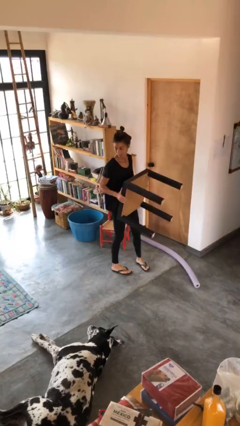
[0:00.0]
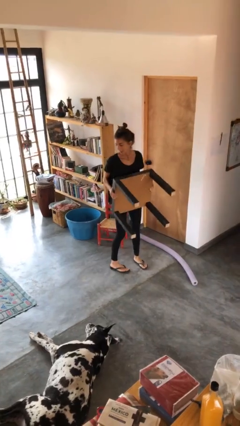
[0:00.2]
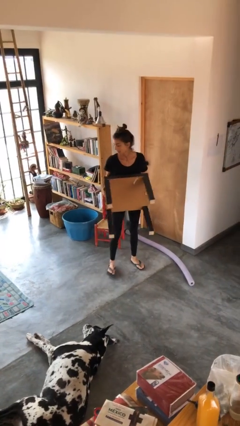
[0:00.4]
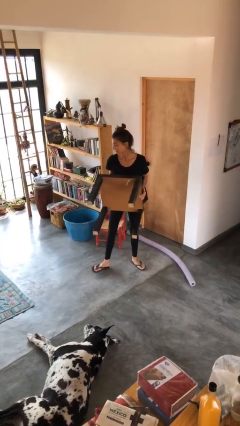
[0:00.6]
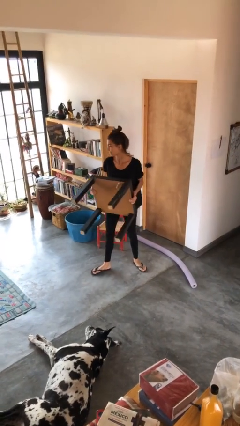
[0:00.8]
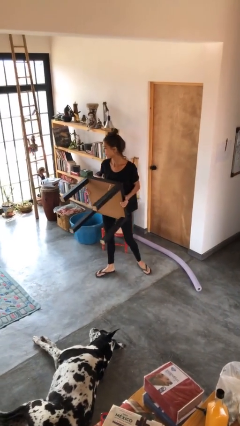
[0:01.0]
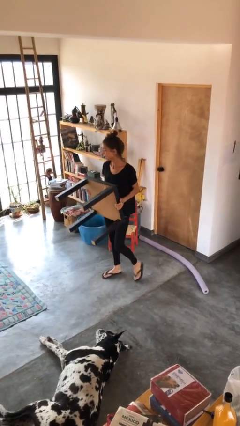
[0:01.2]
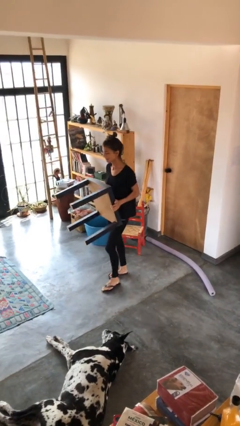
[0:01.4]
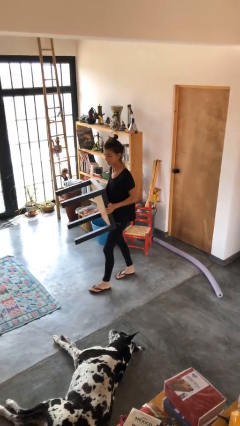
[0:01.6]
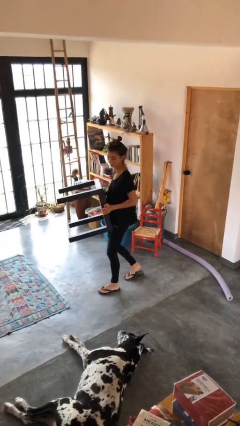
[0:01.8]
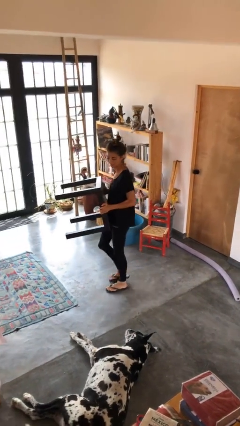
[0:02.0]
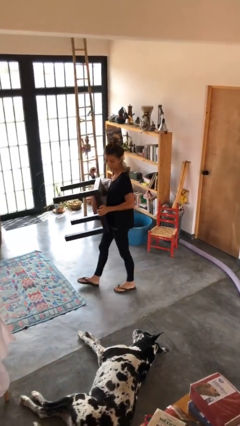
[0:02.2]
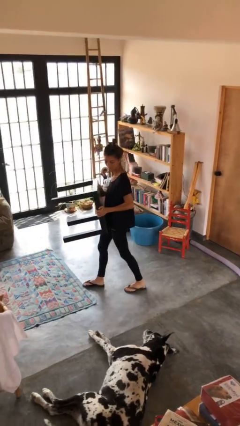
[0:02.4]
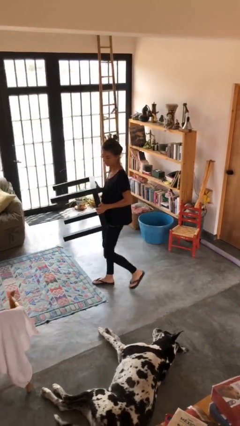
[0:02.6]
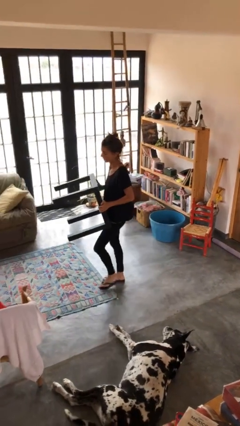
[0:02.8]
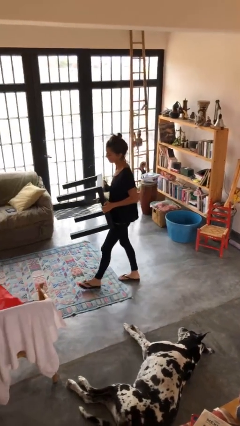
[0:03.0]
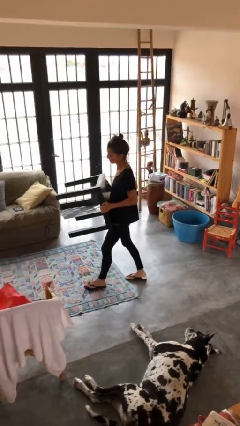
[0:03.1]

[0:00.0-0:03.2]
person carries furniture

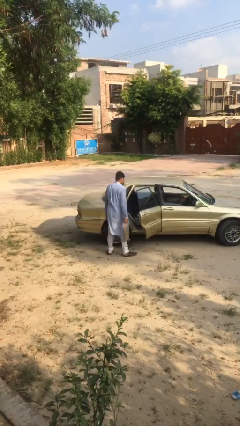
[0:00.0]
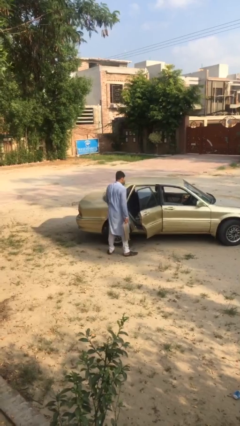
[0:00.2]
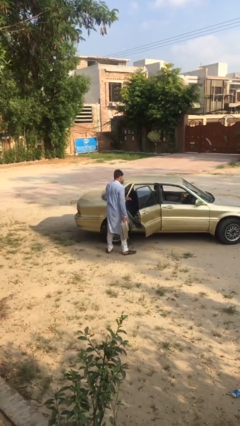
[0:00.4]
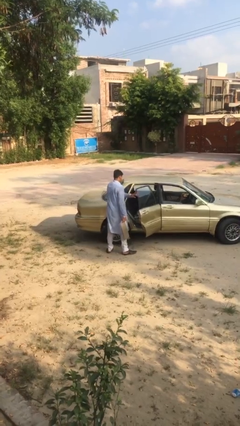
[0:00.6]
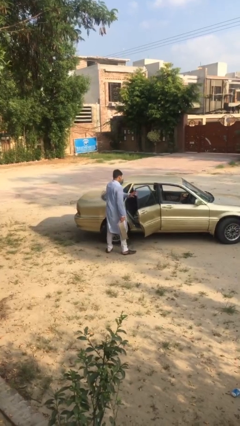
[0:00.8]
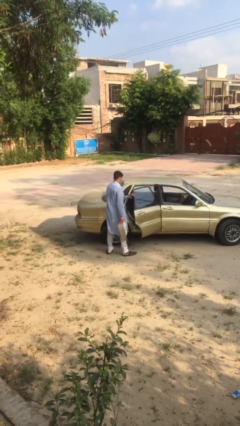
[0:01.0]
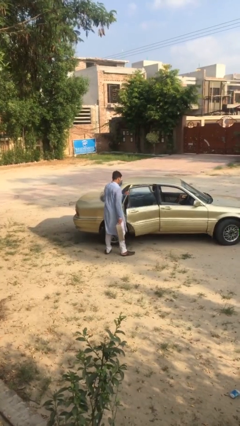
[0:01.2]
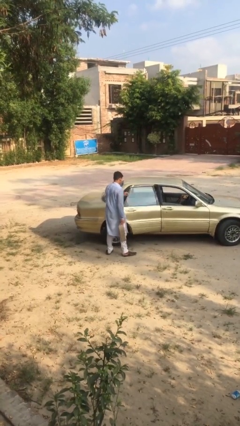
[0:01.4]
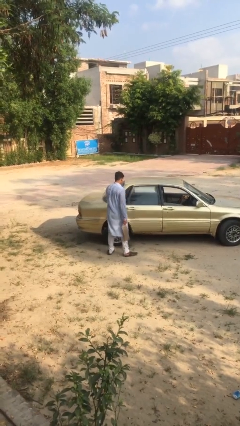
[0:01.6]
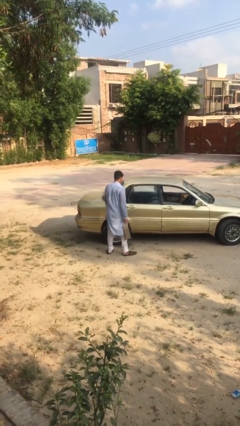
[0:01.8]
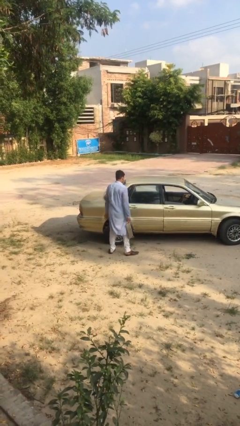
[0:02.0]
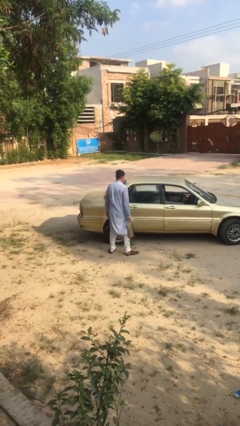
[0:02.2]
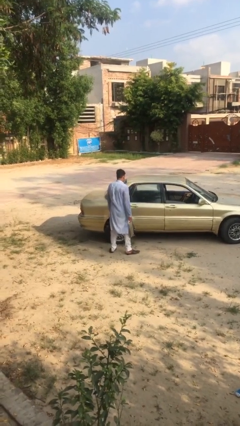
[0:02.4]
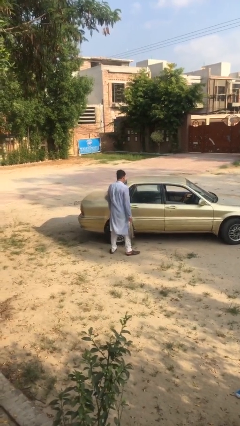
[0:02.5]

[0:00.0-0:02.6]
person closes car door

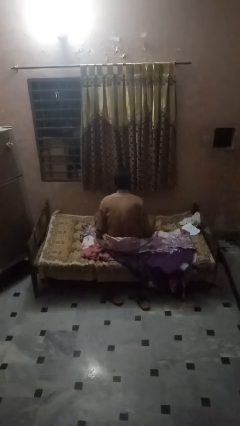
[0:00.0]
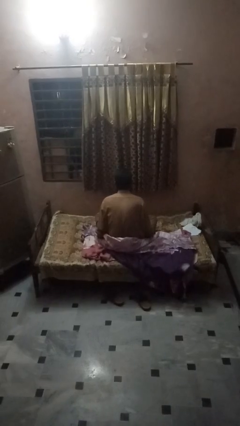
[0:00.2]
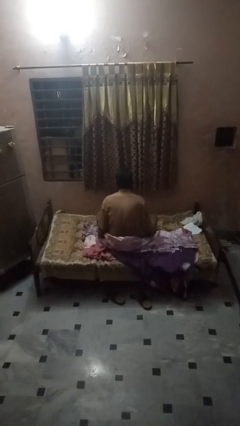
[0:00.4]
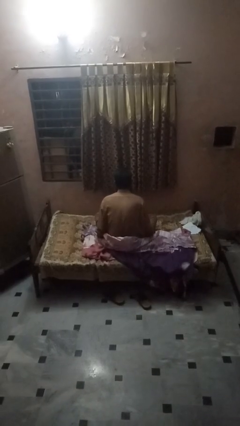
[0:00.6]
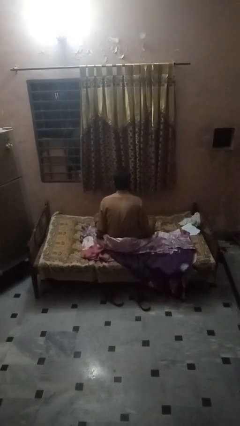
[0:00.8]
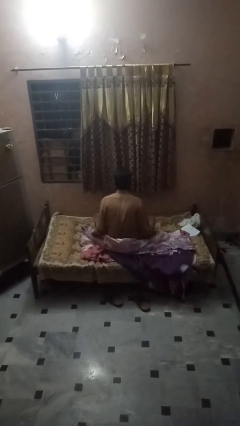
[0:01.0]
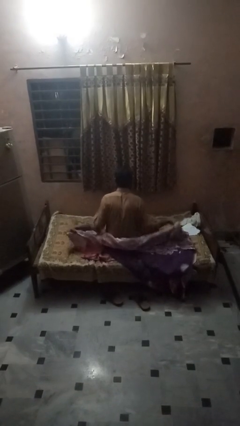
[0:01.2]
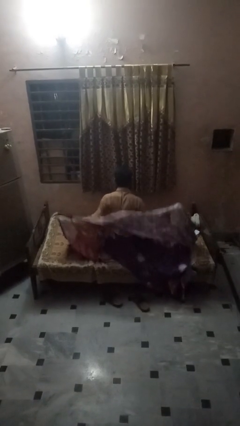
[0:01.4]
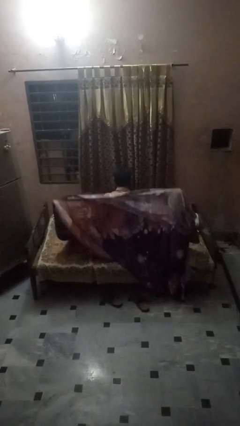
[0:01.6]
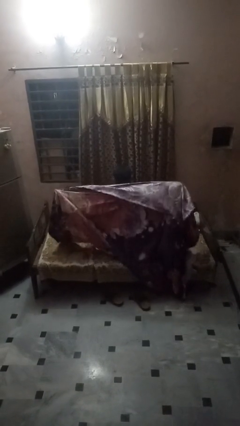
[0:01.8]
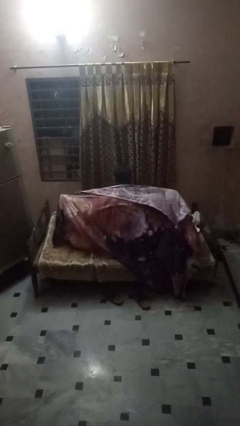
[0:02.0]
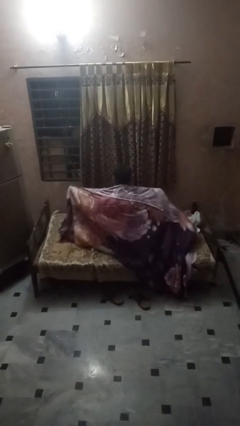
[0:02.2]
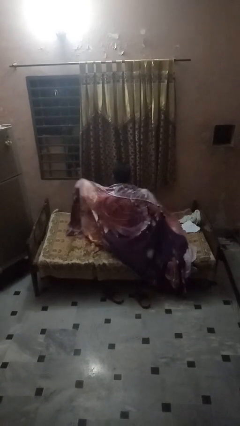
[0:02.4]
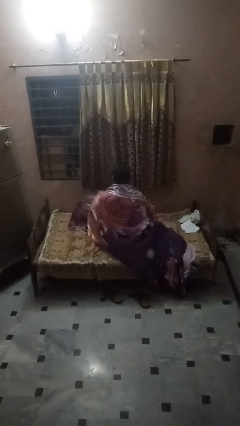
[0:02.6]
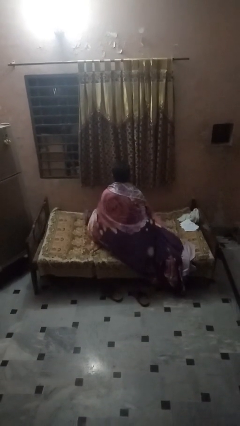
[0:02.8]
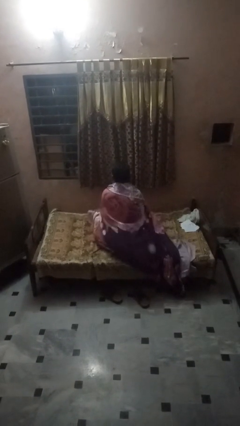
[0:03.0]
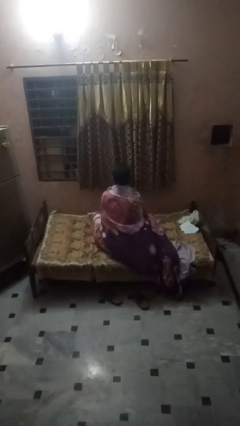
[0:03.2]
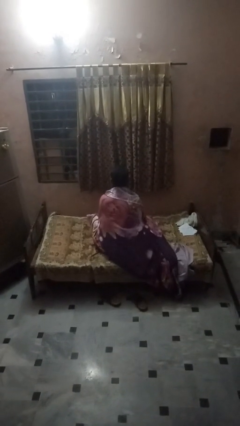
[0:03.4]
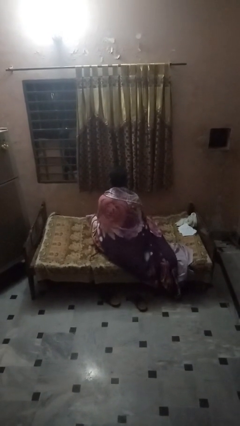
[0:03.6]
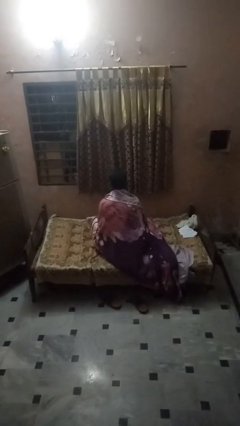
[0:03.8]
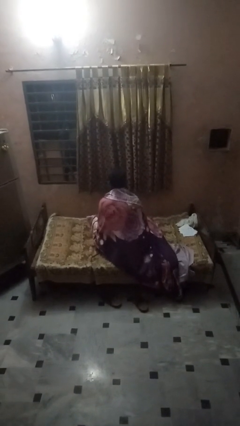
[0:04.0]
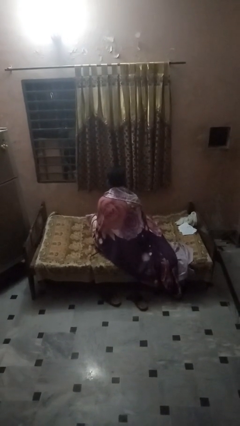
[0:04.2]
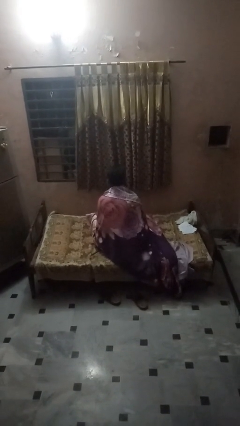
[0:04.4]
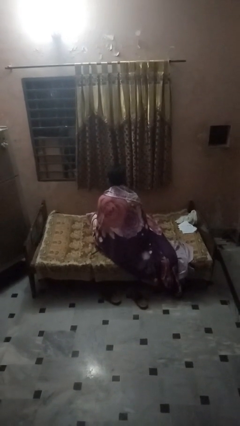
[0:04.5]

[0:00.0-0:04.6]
person covers with bedsheets

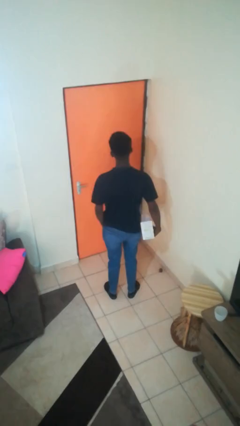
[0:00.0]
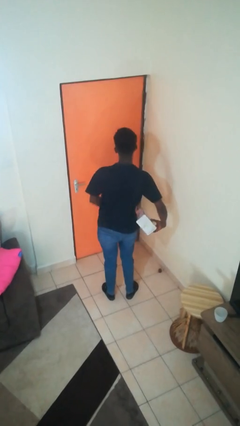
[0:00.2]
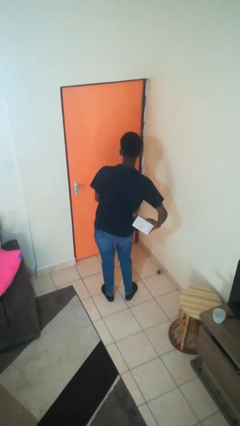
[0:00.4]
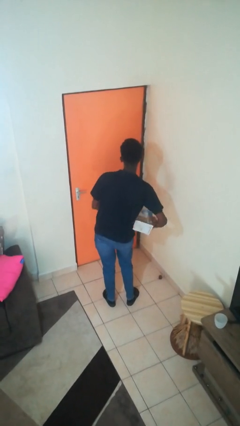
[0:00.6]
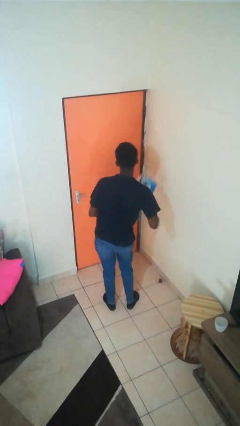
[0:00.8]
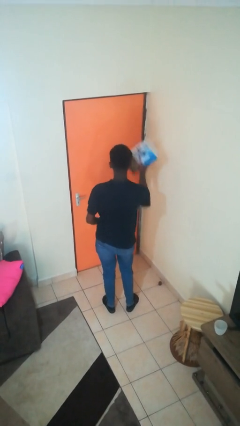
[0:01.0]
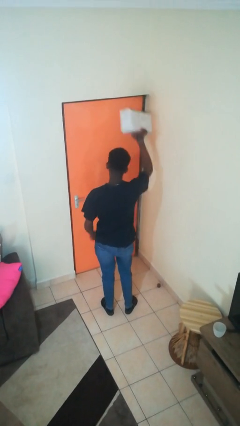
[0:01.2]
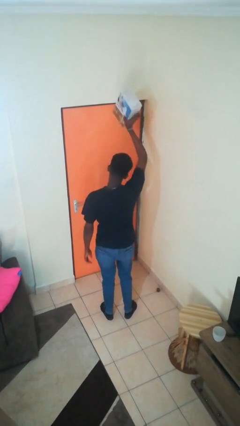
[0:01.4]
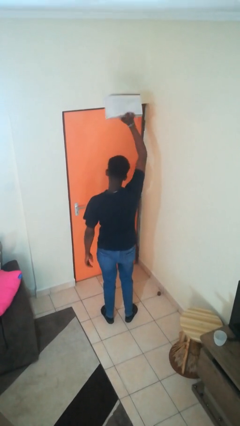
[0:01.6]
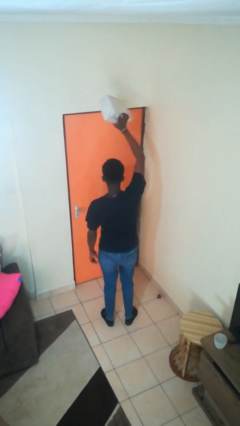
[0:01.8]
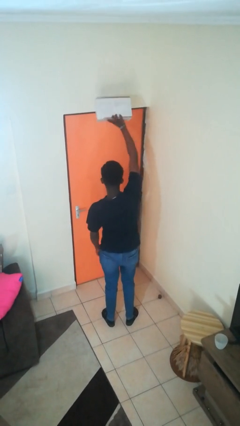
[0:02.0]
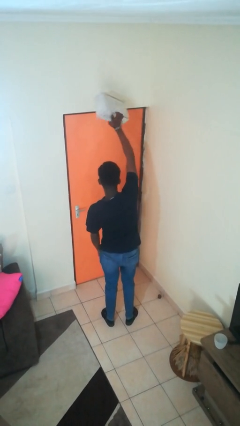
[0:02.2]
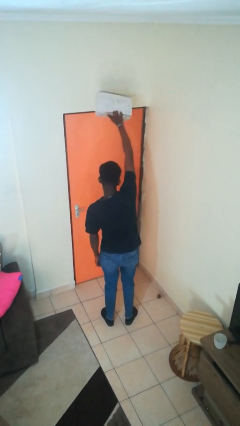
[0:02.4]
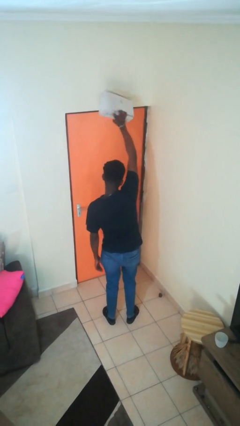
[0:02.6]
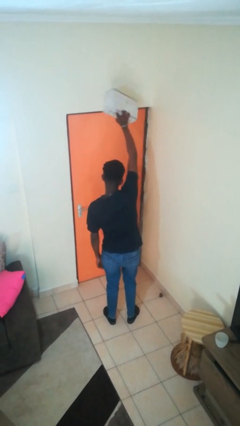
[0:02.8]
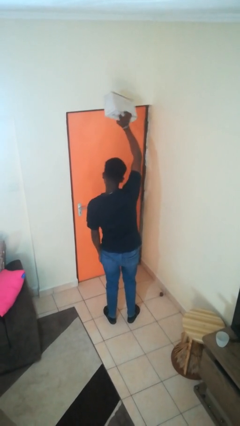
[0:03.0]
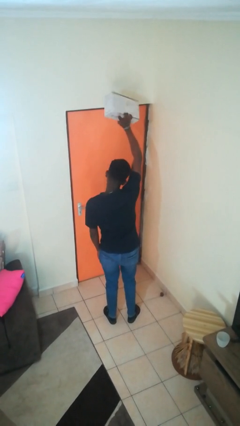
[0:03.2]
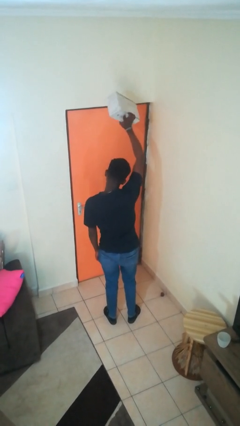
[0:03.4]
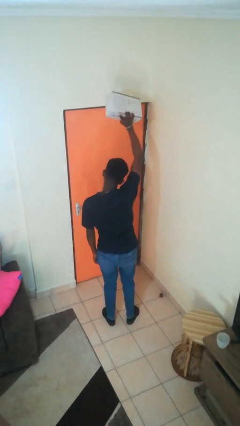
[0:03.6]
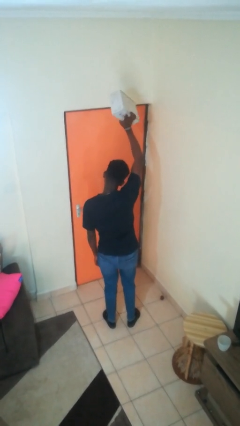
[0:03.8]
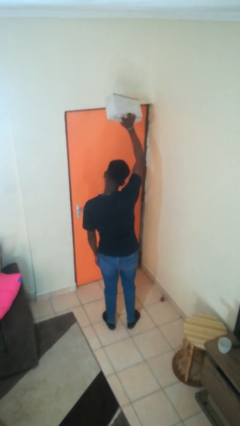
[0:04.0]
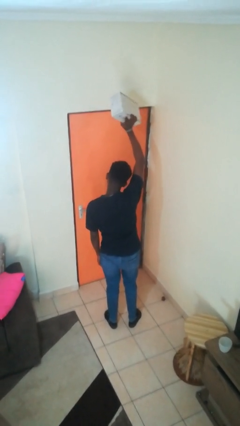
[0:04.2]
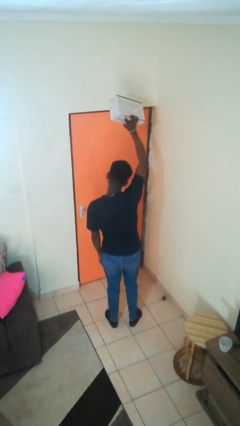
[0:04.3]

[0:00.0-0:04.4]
person holds object above head

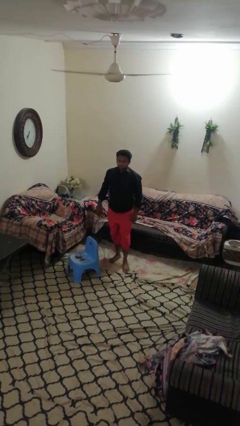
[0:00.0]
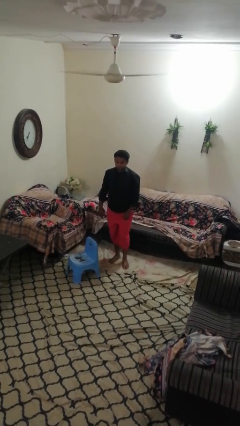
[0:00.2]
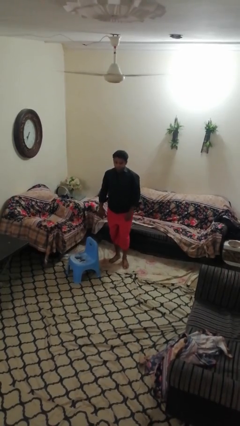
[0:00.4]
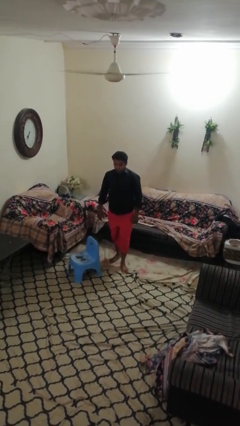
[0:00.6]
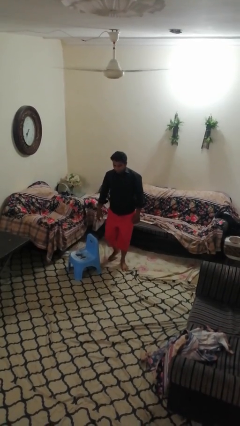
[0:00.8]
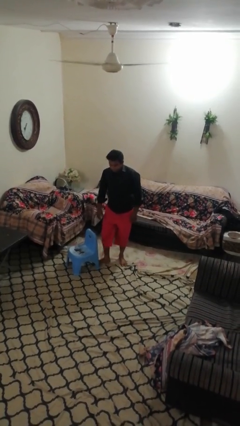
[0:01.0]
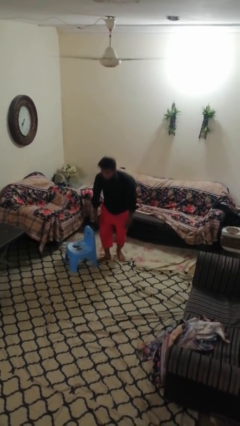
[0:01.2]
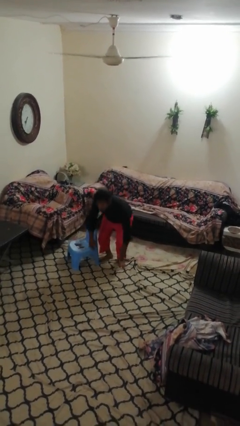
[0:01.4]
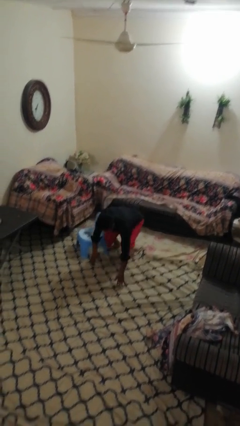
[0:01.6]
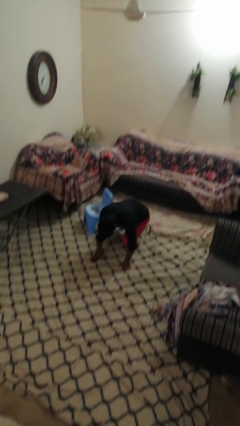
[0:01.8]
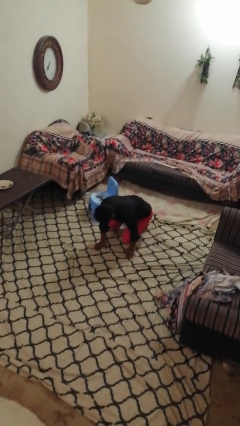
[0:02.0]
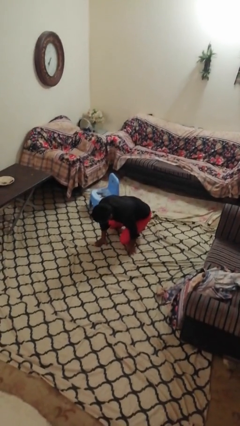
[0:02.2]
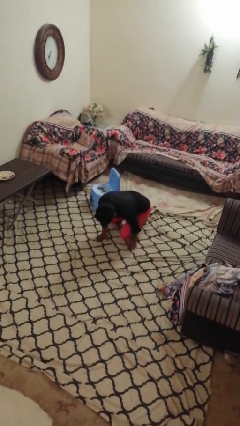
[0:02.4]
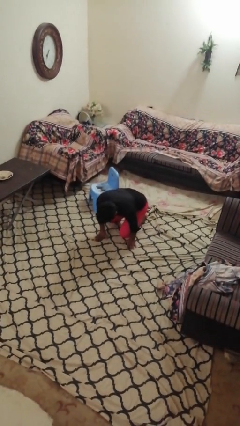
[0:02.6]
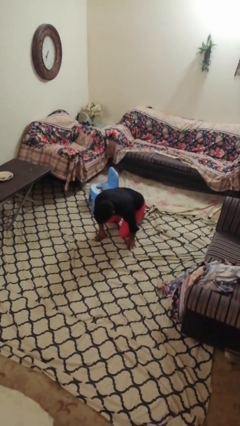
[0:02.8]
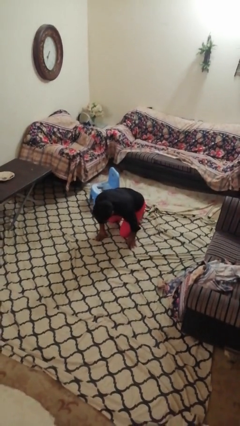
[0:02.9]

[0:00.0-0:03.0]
person trips on object on floor
